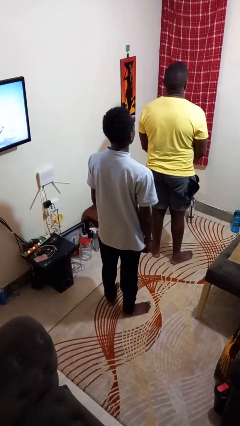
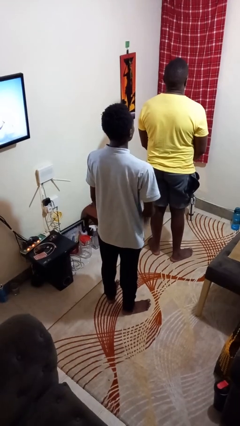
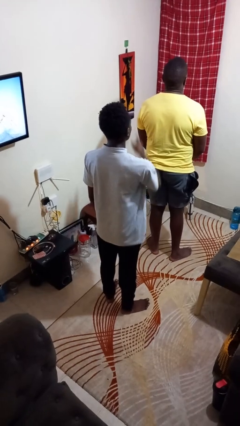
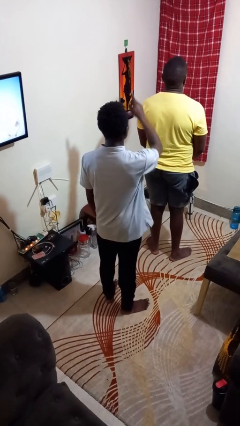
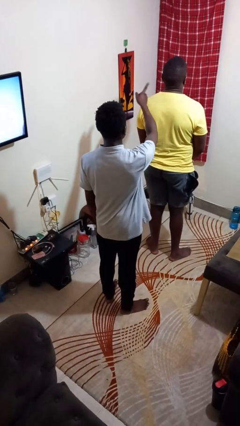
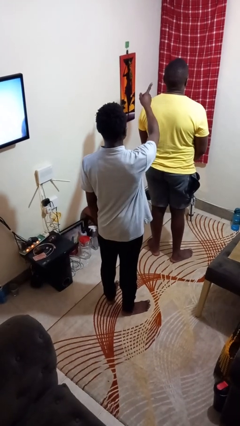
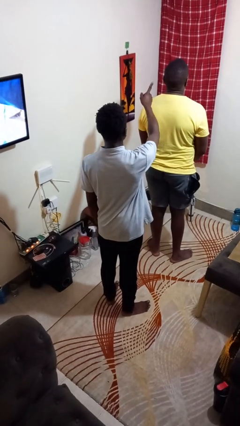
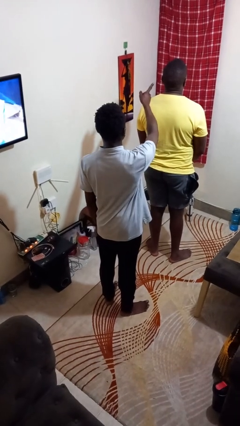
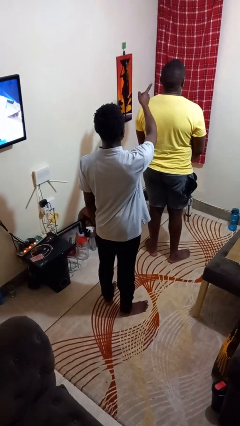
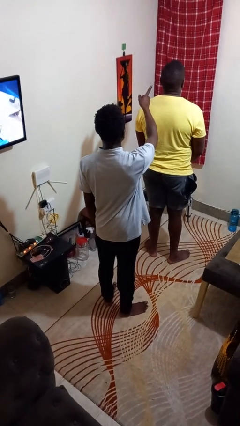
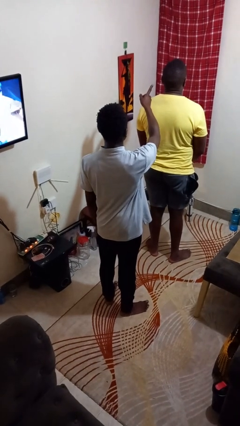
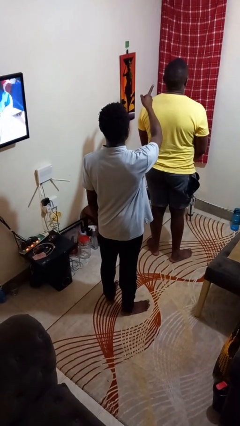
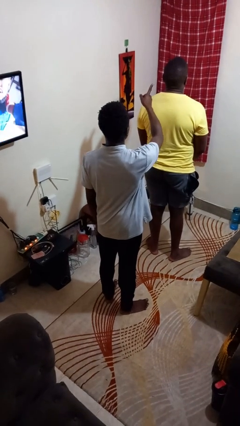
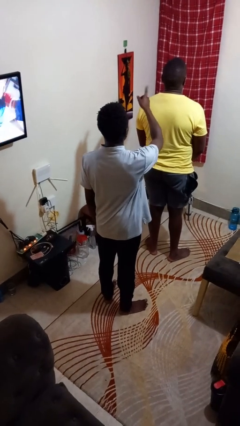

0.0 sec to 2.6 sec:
person points at person

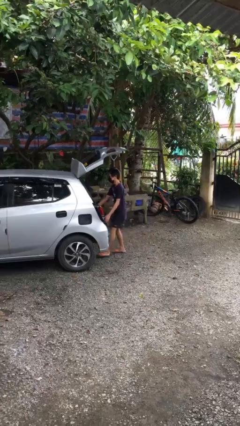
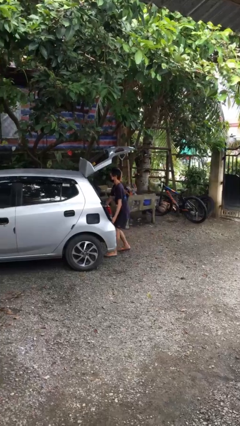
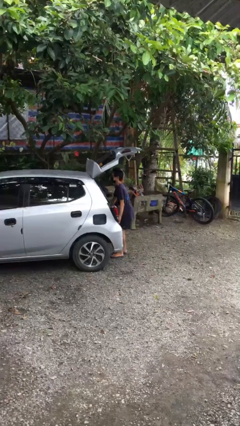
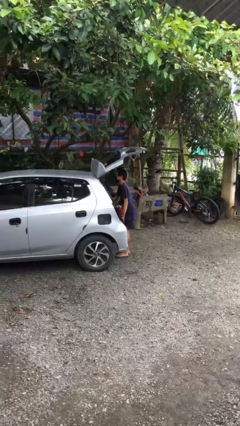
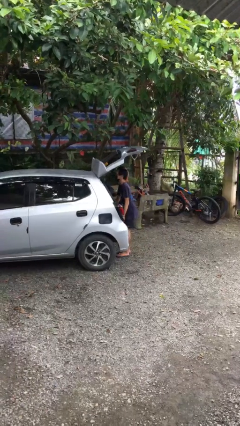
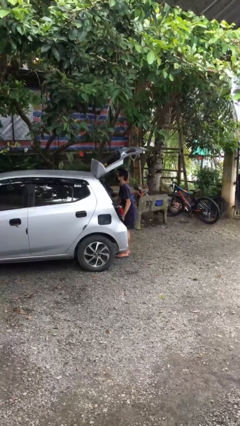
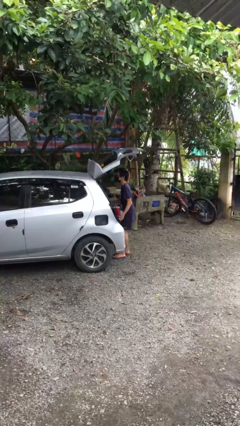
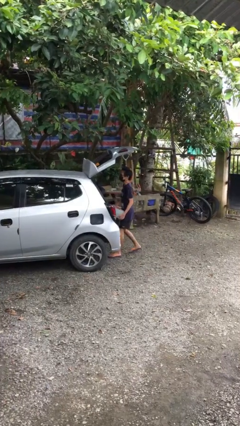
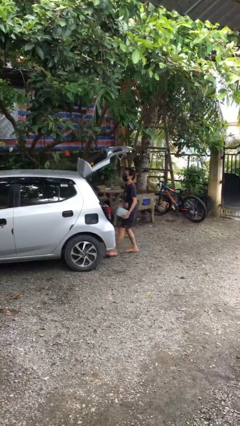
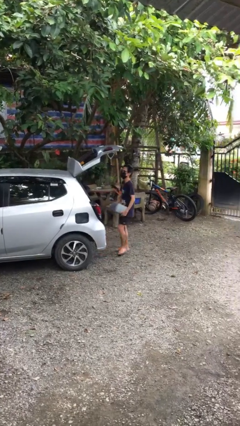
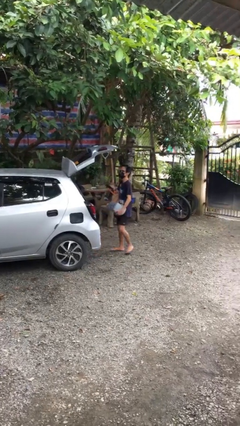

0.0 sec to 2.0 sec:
person unloads car

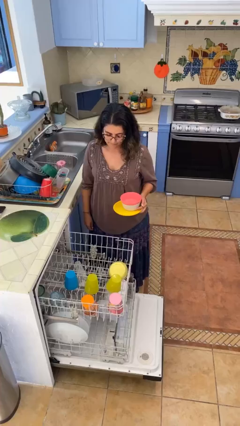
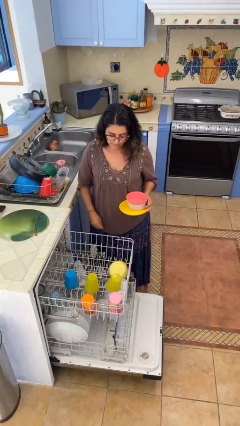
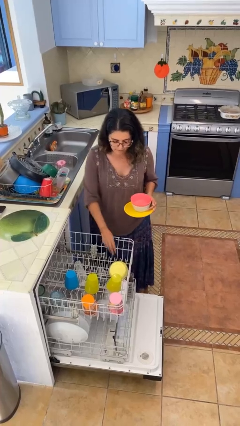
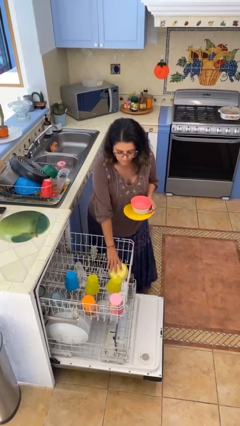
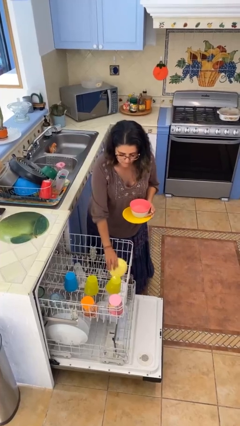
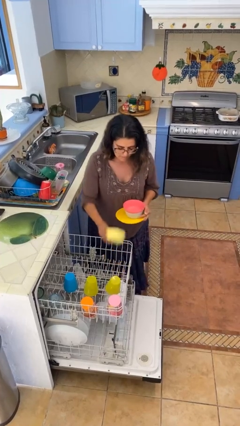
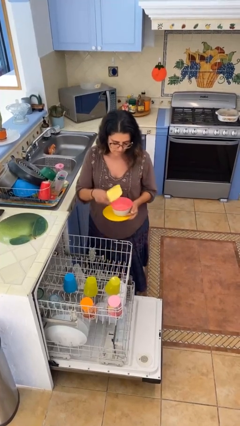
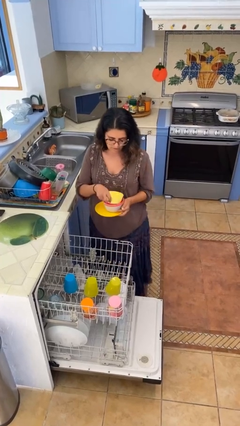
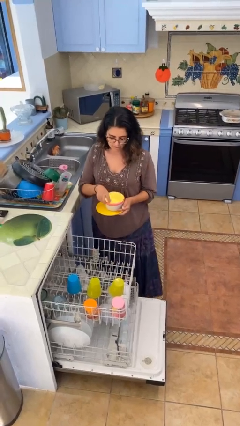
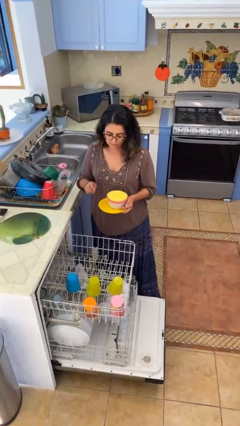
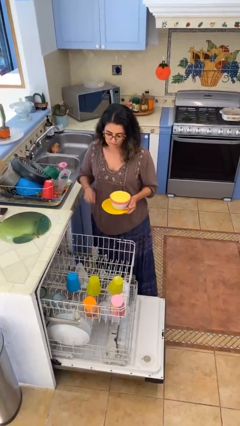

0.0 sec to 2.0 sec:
person unloads dishwasher

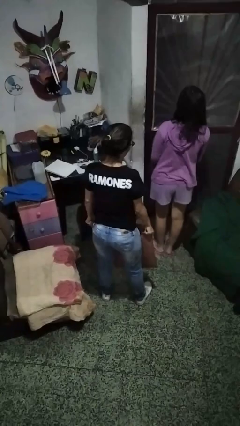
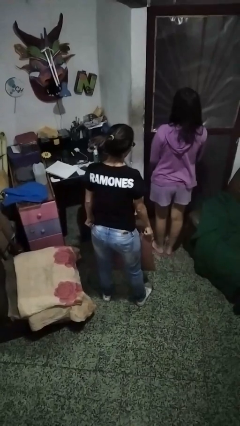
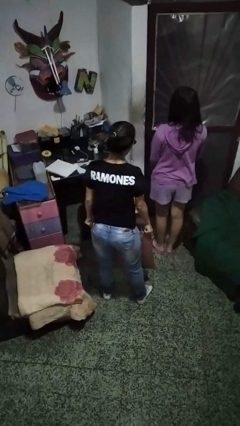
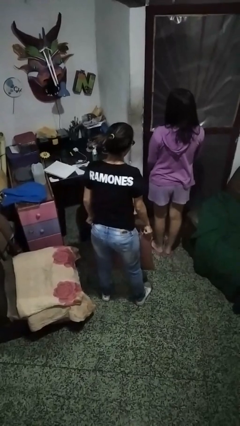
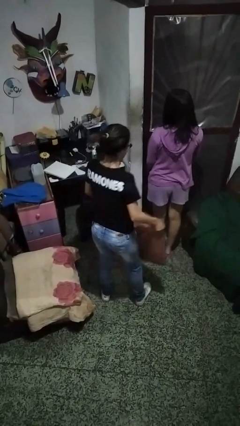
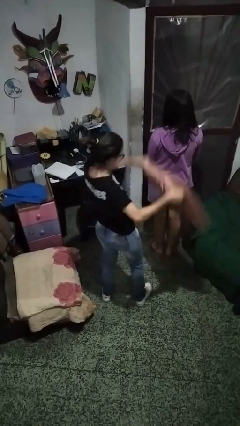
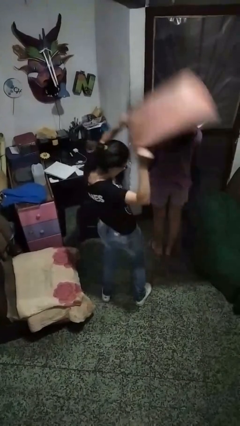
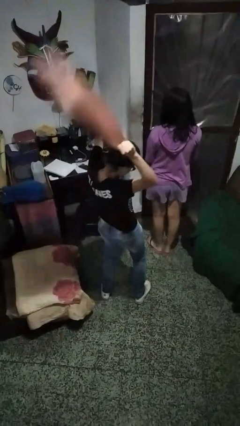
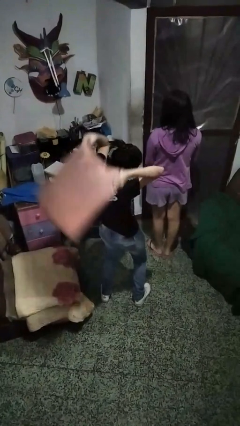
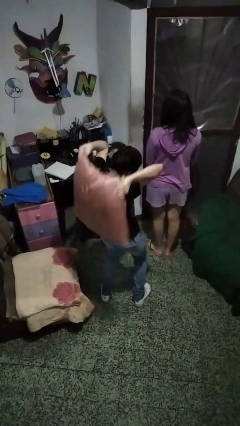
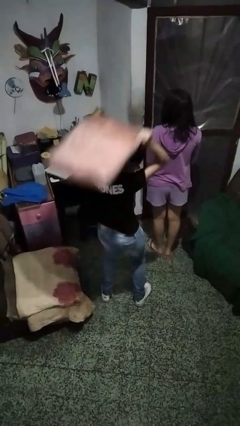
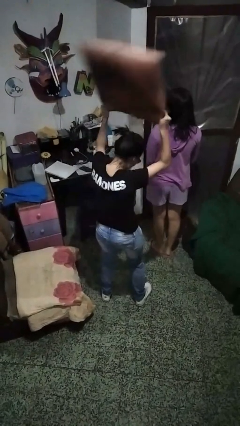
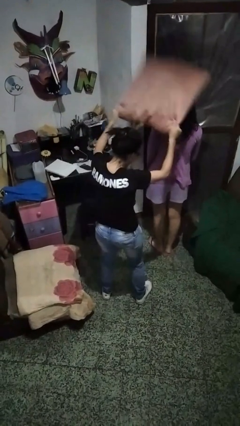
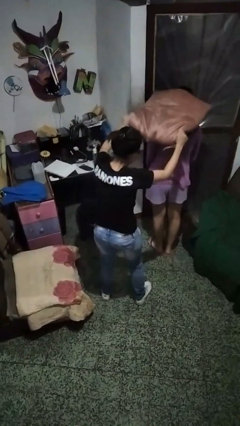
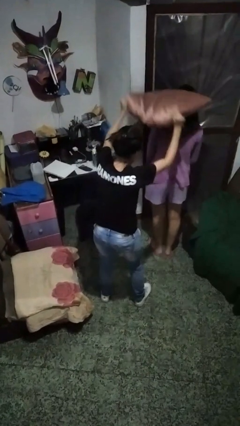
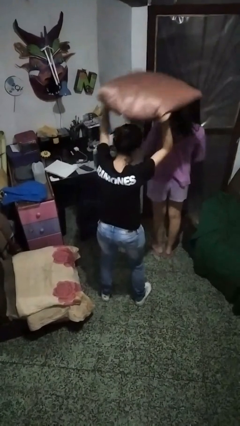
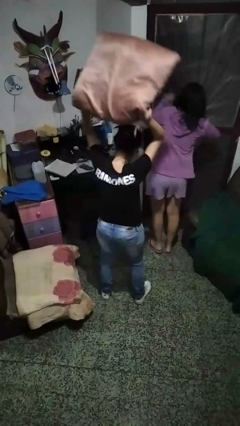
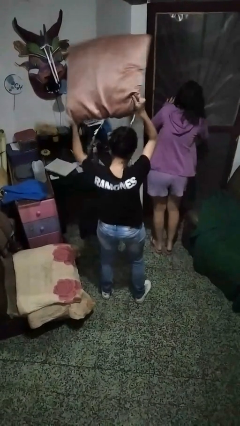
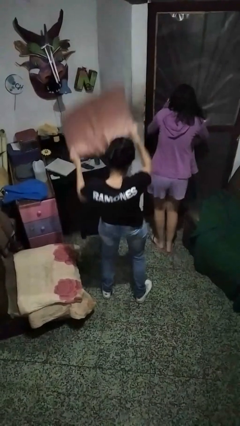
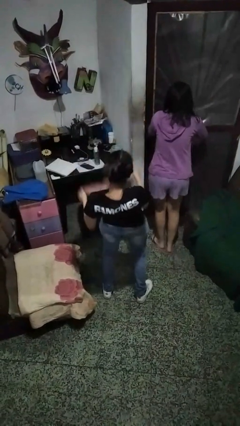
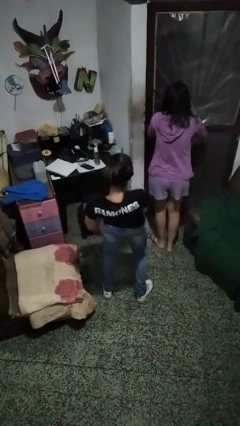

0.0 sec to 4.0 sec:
person hits person with pillow

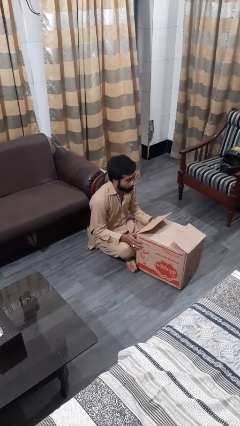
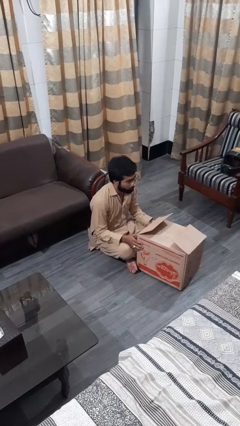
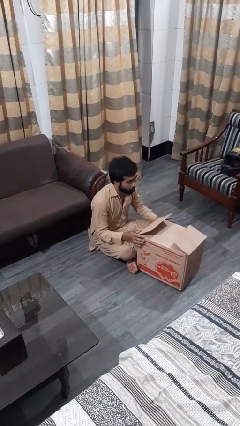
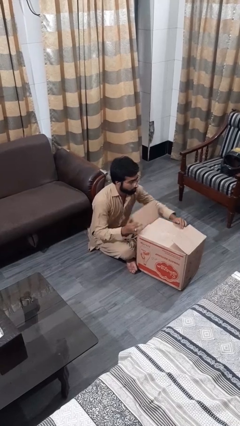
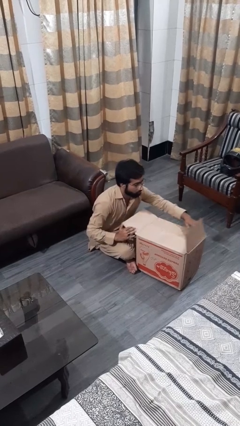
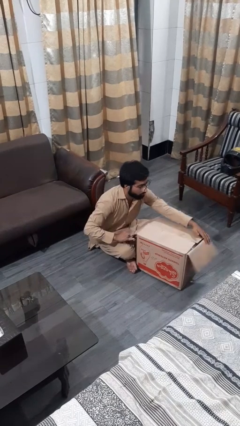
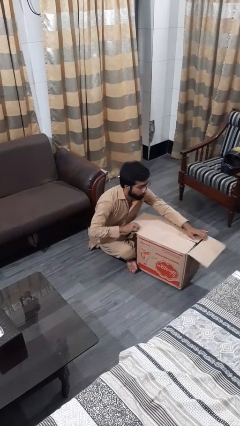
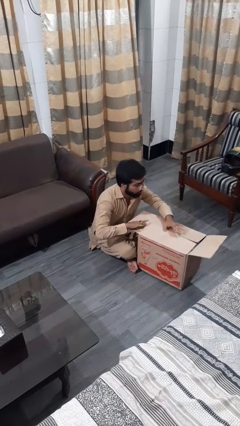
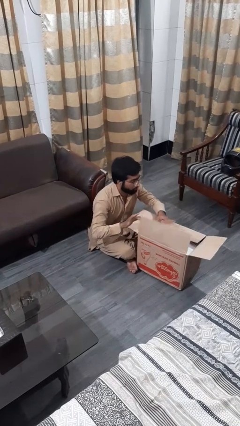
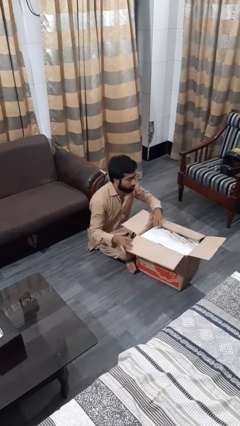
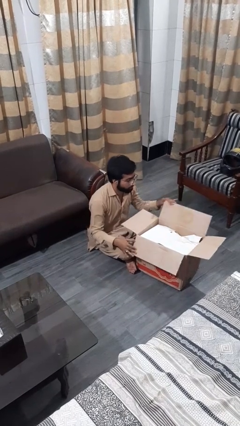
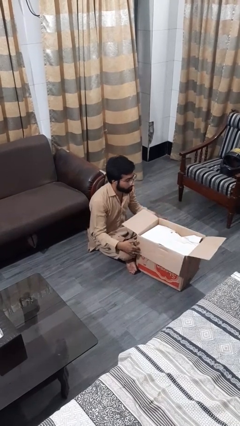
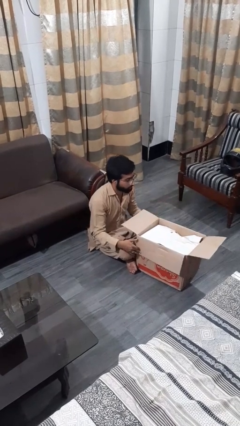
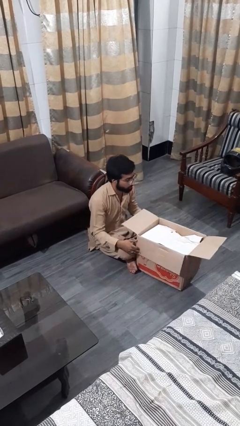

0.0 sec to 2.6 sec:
person opens box

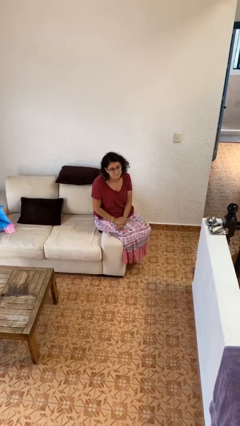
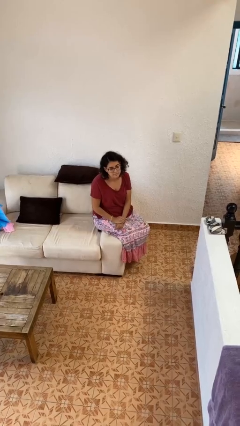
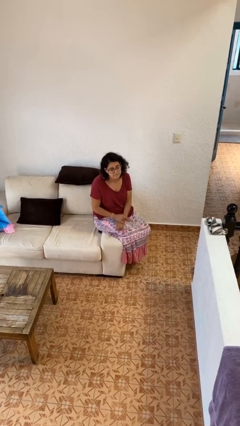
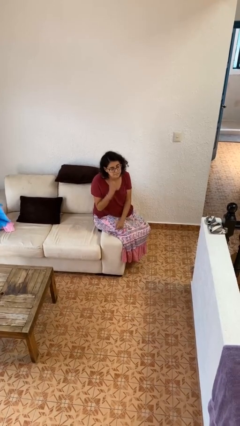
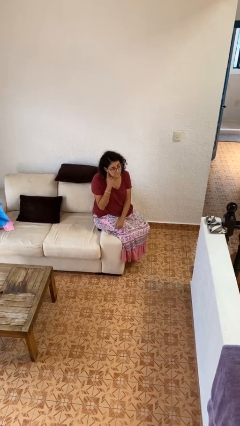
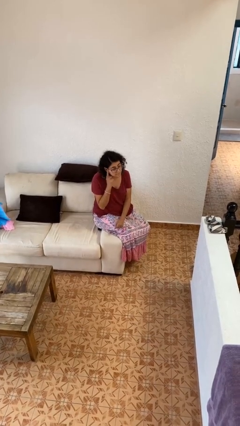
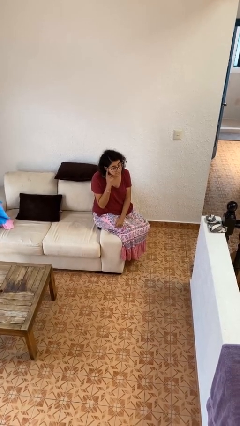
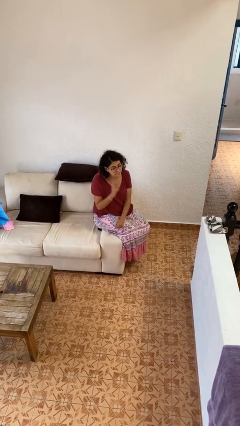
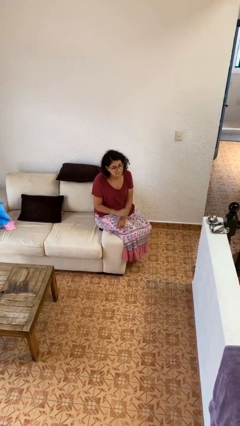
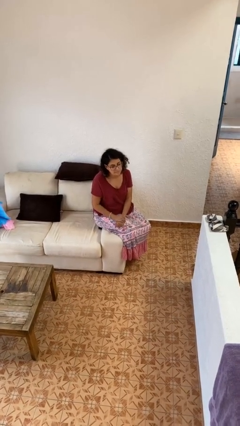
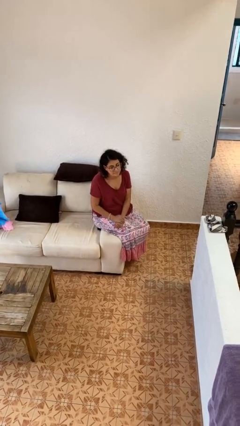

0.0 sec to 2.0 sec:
person gestures listen closely

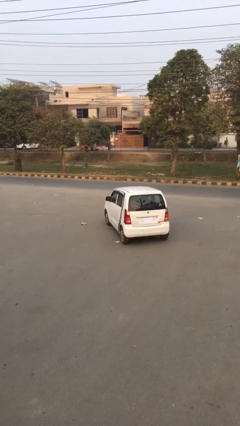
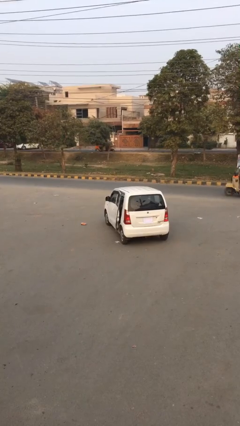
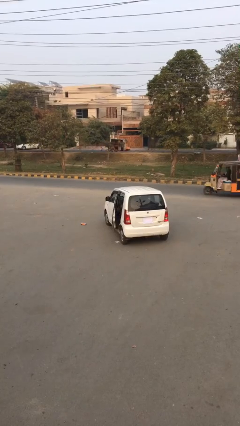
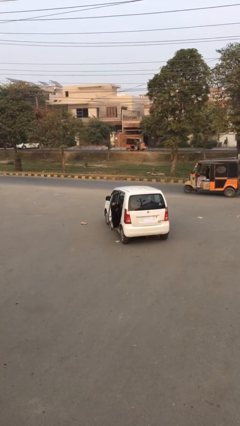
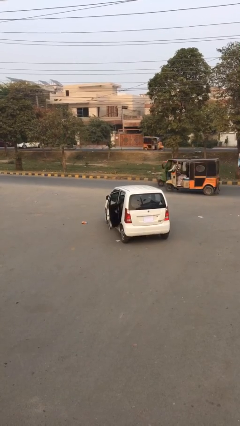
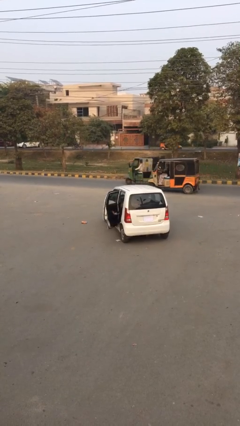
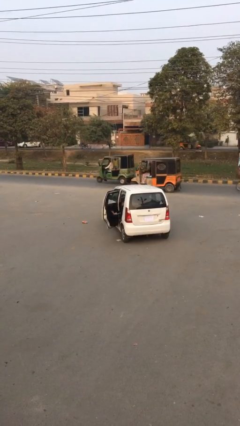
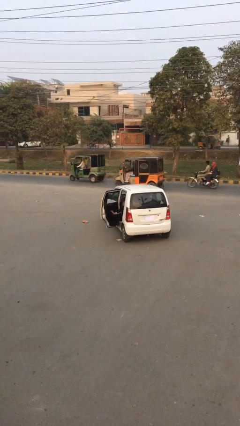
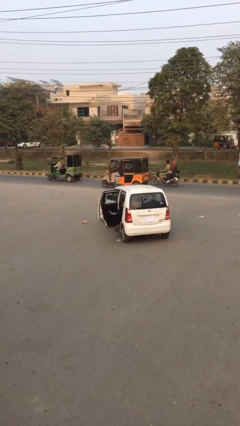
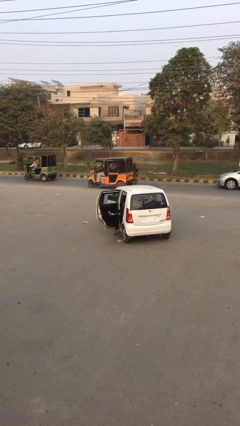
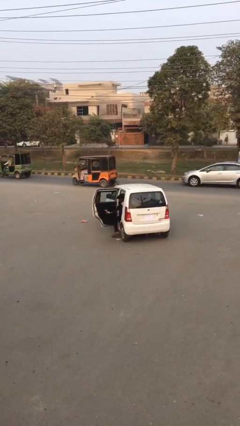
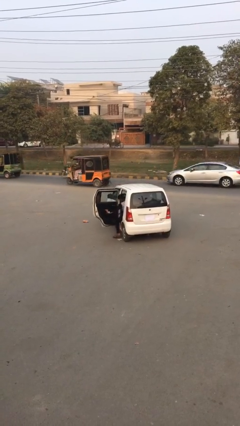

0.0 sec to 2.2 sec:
person opens car door
